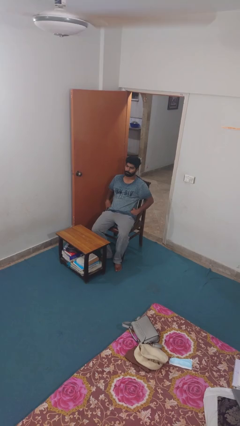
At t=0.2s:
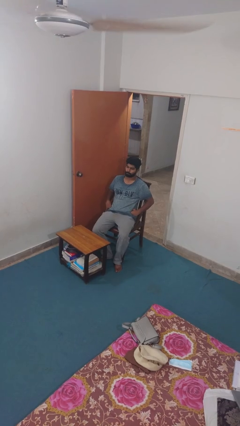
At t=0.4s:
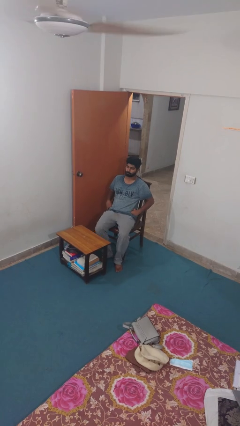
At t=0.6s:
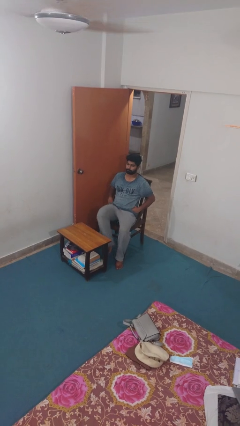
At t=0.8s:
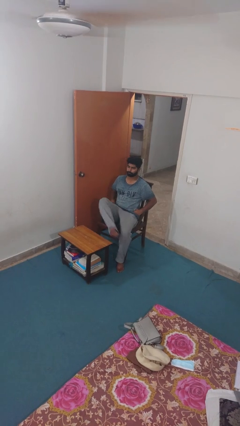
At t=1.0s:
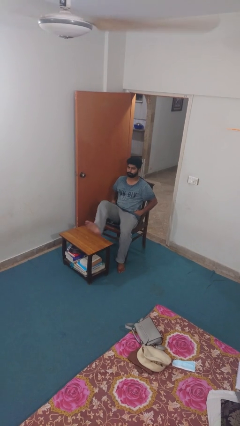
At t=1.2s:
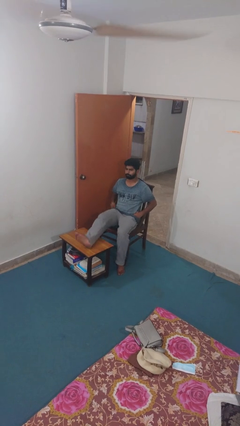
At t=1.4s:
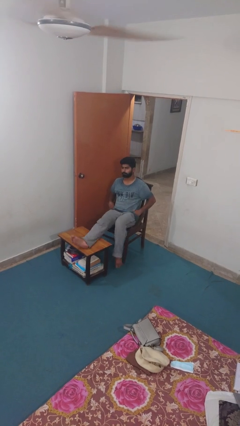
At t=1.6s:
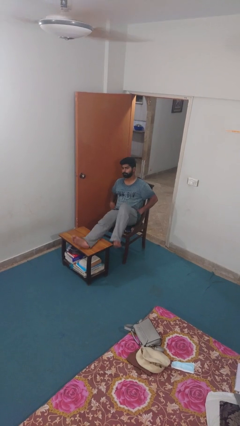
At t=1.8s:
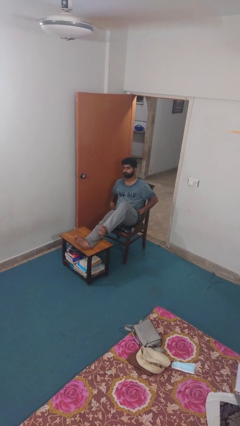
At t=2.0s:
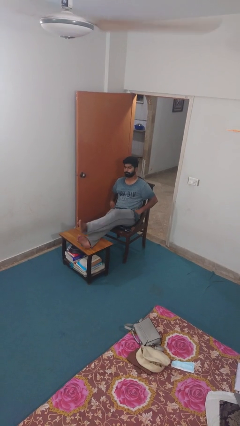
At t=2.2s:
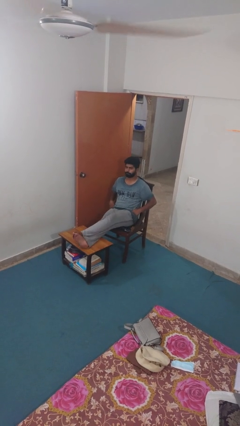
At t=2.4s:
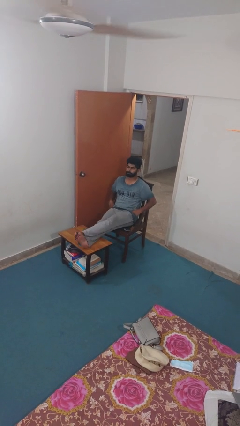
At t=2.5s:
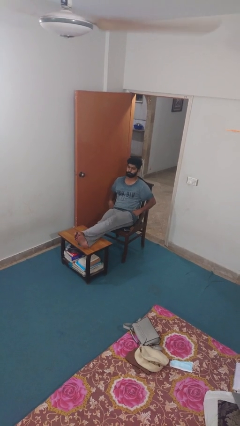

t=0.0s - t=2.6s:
person puts feet up

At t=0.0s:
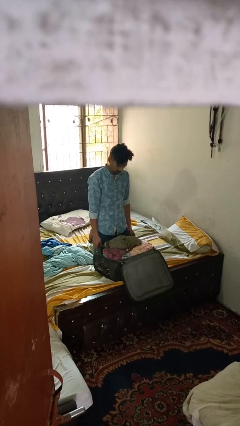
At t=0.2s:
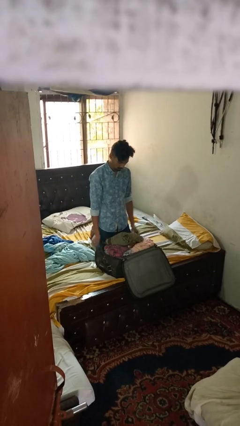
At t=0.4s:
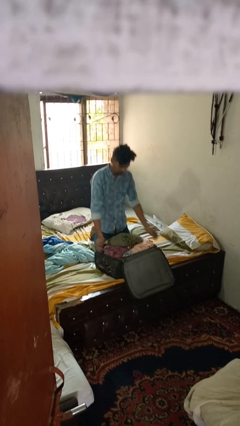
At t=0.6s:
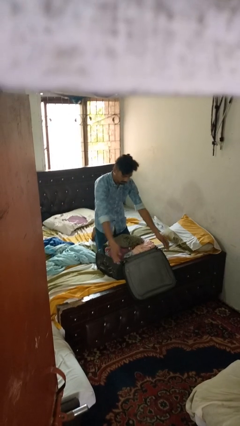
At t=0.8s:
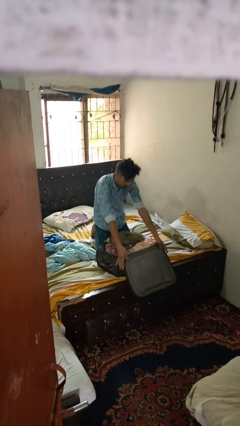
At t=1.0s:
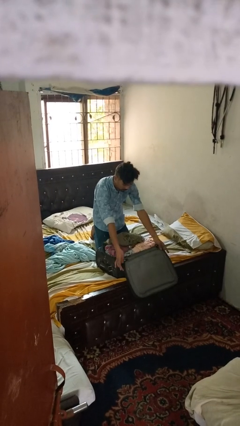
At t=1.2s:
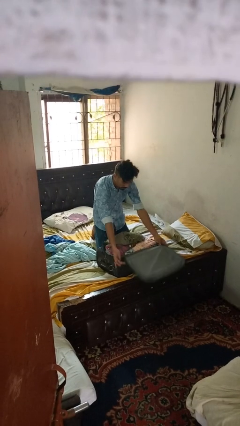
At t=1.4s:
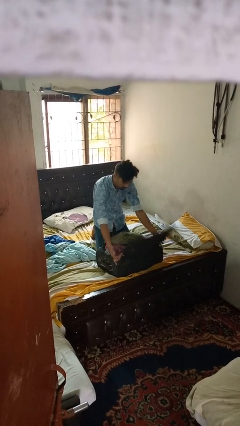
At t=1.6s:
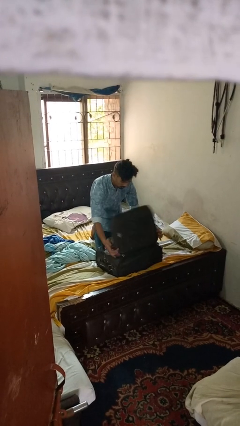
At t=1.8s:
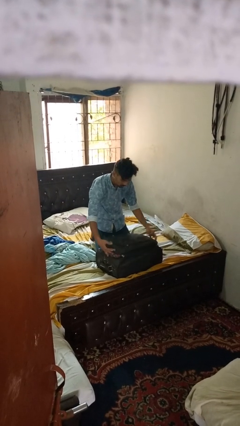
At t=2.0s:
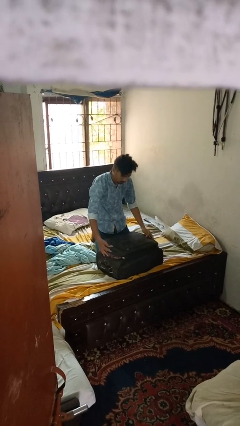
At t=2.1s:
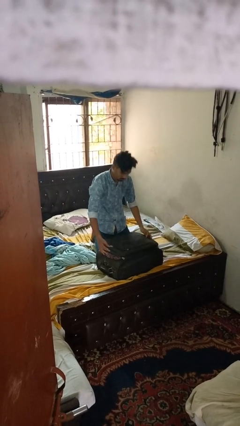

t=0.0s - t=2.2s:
person closes suitcase

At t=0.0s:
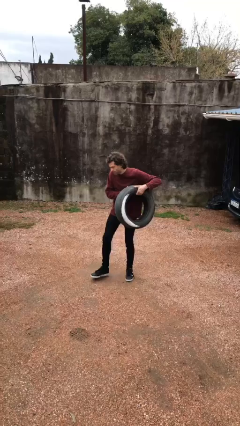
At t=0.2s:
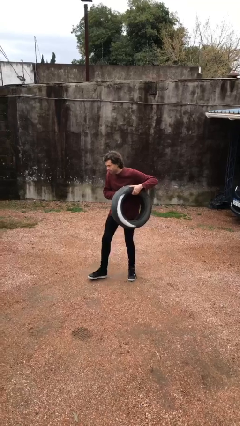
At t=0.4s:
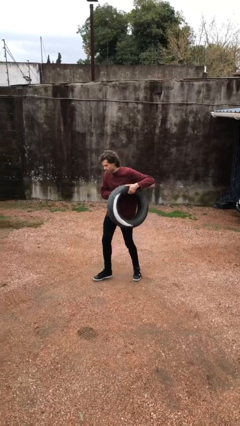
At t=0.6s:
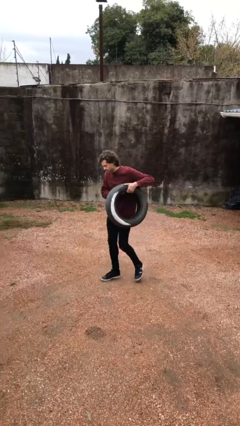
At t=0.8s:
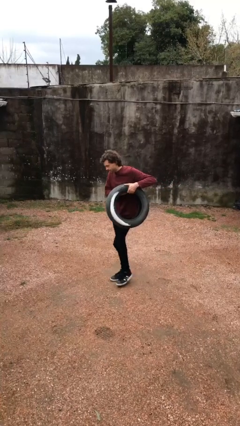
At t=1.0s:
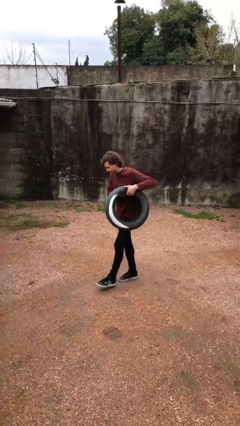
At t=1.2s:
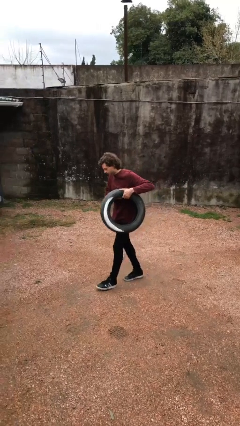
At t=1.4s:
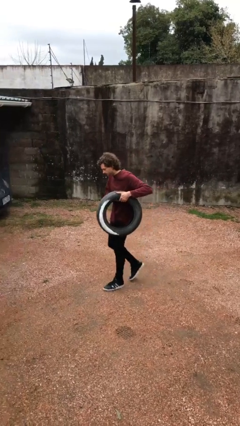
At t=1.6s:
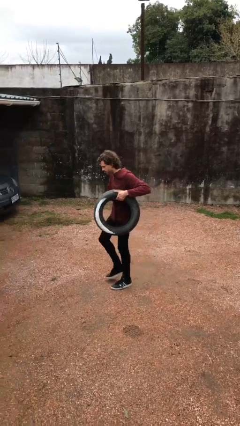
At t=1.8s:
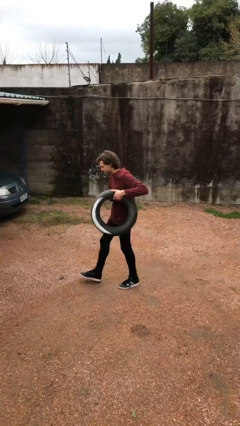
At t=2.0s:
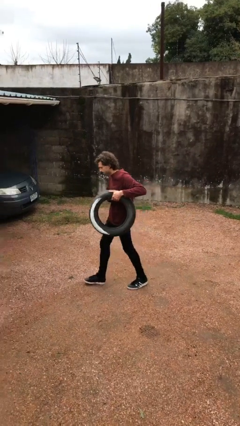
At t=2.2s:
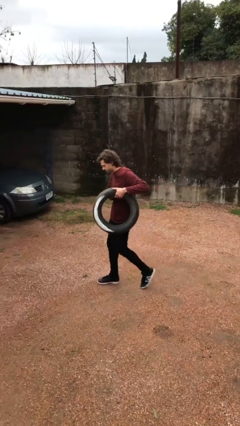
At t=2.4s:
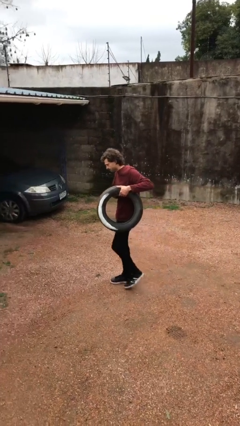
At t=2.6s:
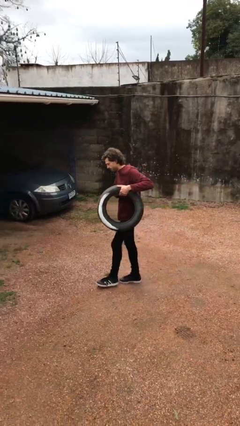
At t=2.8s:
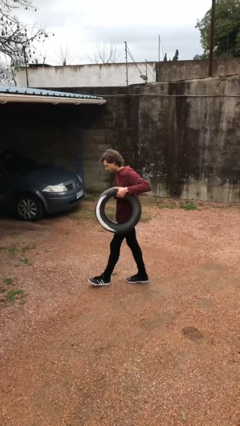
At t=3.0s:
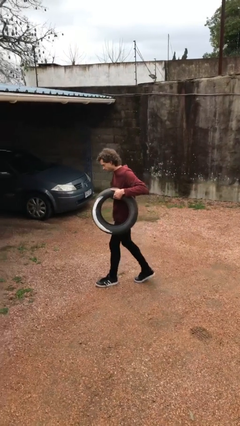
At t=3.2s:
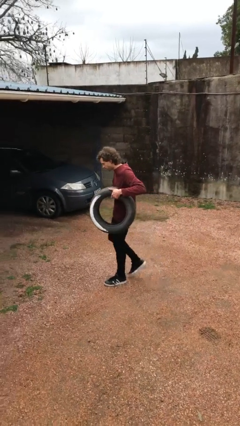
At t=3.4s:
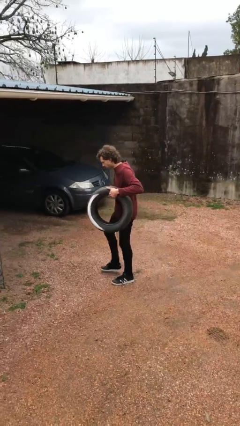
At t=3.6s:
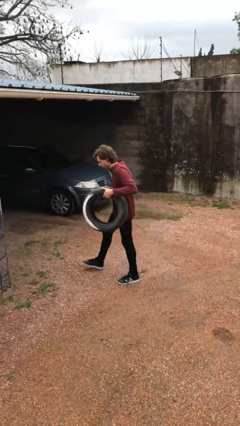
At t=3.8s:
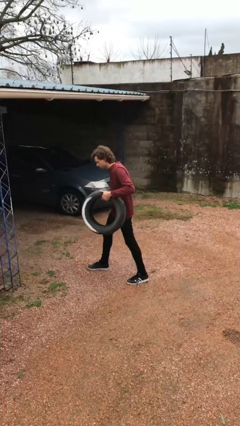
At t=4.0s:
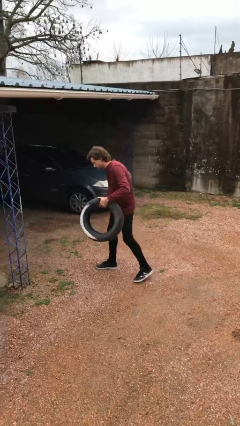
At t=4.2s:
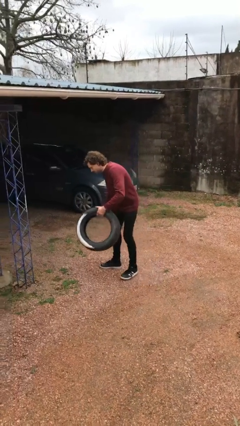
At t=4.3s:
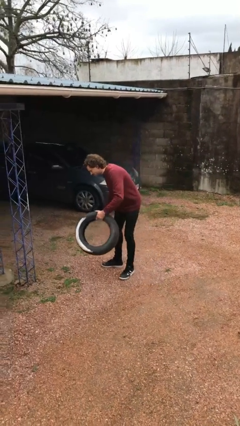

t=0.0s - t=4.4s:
person carries heavy object

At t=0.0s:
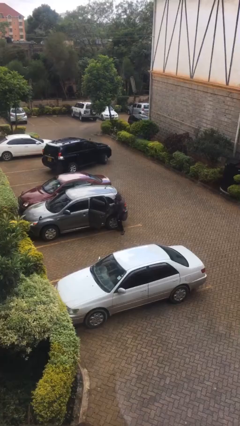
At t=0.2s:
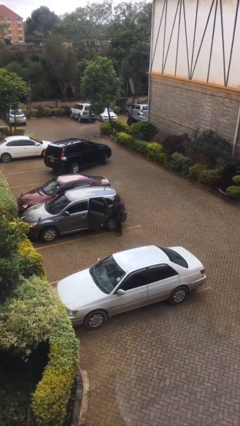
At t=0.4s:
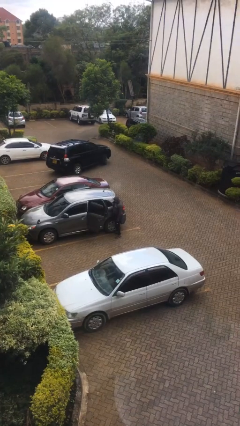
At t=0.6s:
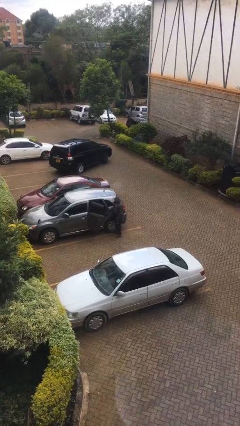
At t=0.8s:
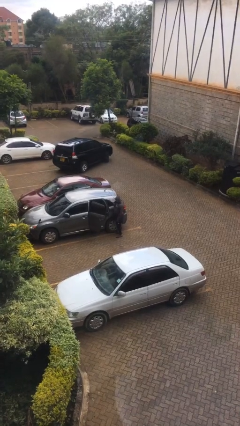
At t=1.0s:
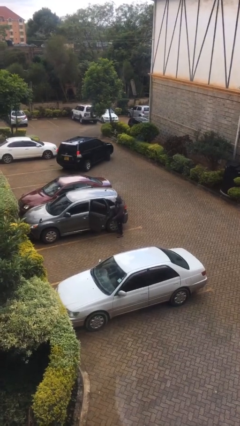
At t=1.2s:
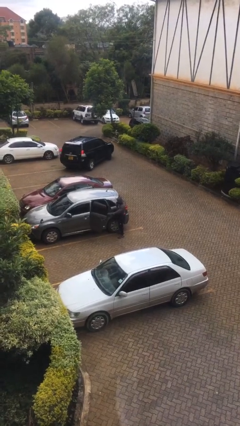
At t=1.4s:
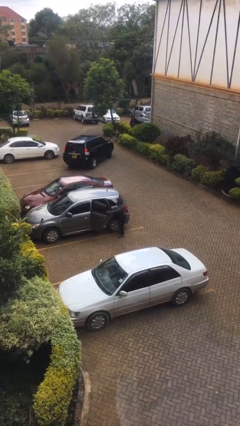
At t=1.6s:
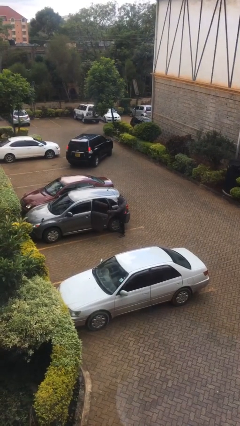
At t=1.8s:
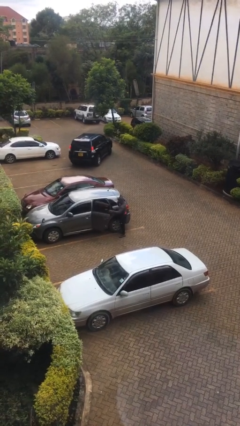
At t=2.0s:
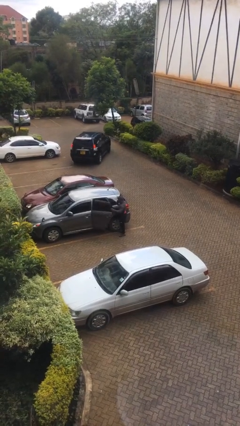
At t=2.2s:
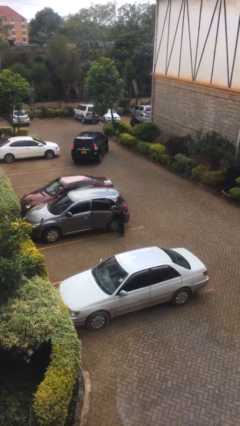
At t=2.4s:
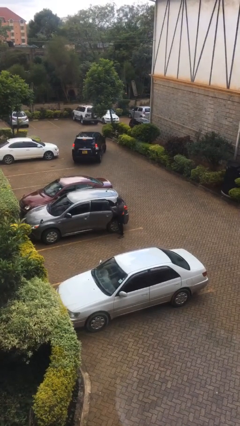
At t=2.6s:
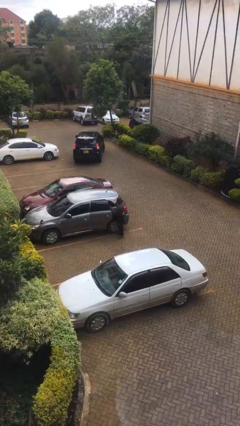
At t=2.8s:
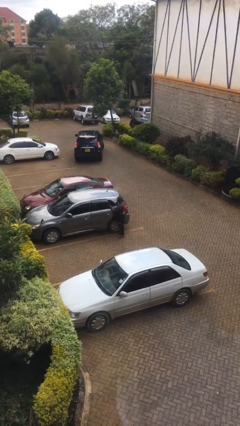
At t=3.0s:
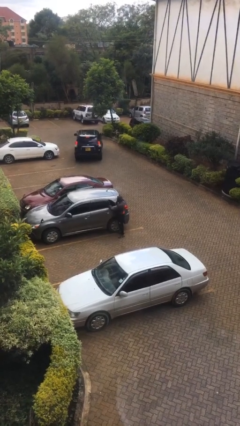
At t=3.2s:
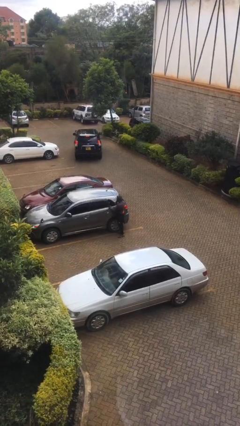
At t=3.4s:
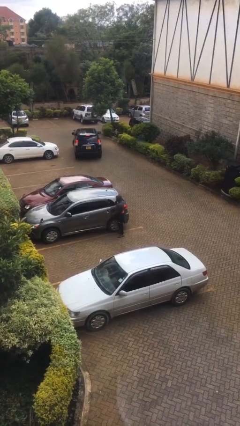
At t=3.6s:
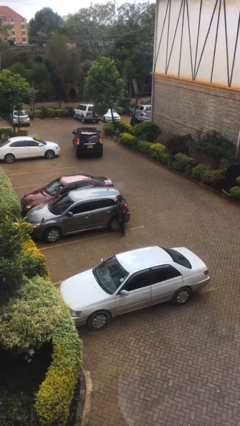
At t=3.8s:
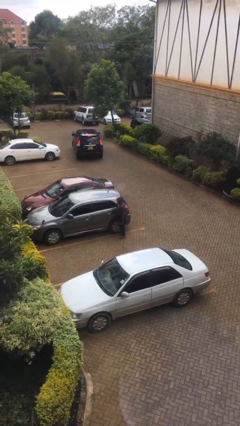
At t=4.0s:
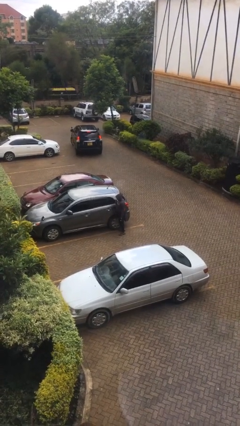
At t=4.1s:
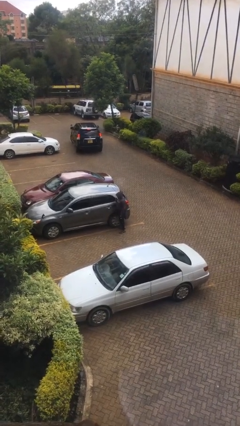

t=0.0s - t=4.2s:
person closes car door

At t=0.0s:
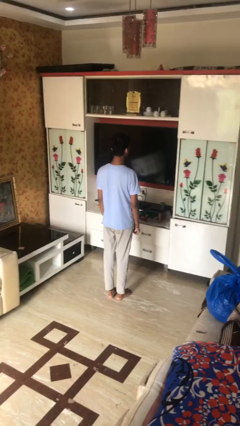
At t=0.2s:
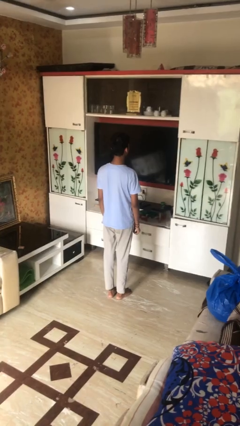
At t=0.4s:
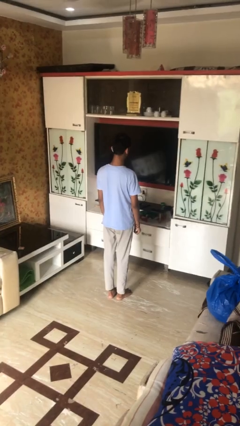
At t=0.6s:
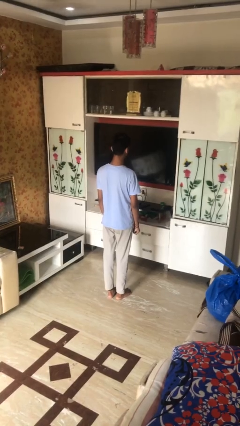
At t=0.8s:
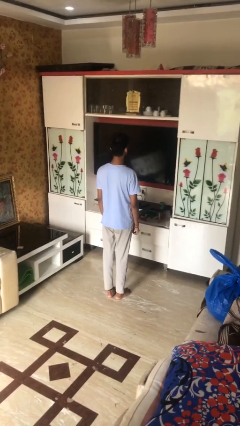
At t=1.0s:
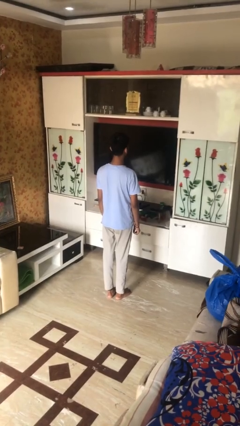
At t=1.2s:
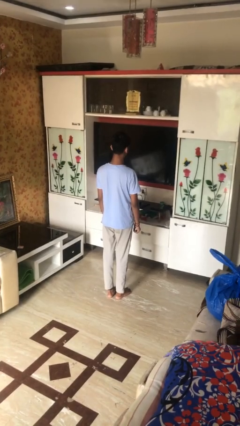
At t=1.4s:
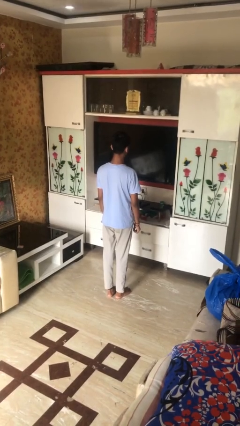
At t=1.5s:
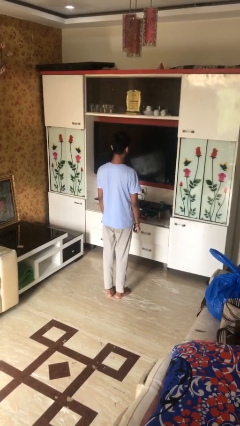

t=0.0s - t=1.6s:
person nods head

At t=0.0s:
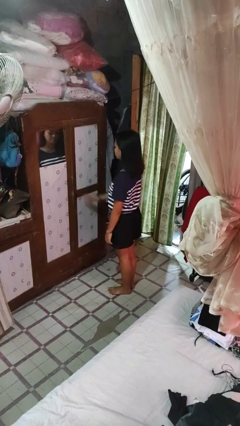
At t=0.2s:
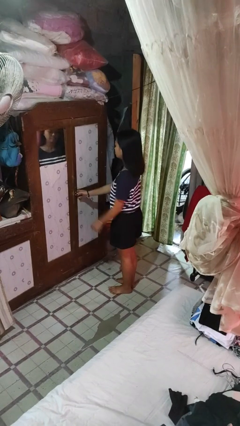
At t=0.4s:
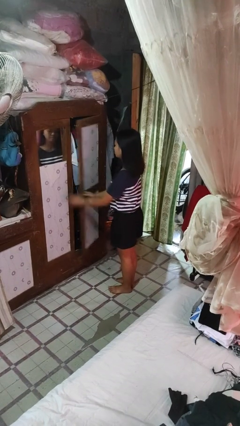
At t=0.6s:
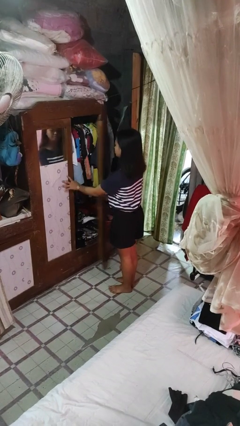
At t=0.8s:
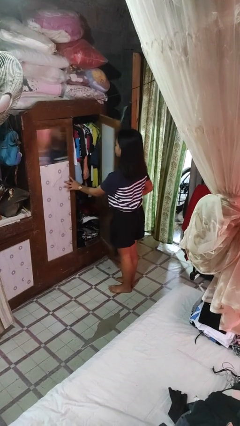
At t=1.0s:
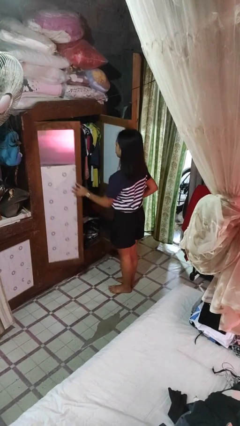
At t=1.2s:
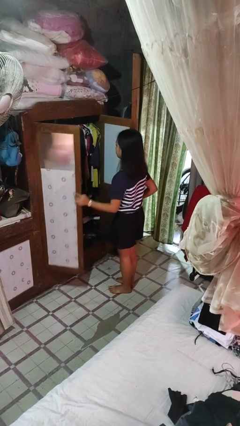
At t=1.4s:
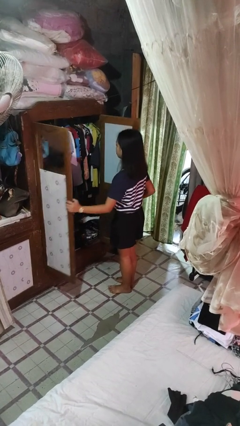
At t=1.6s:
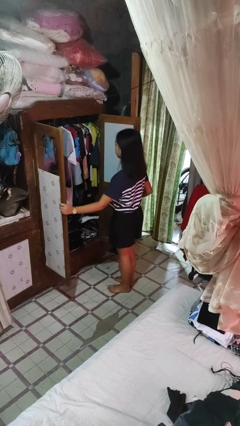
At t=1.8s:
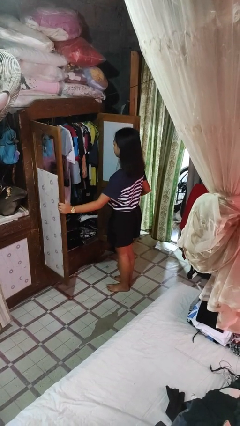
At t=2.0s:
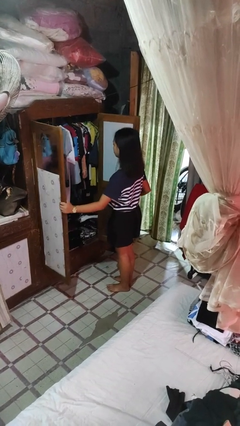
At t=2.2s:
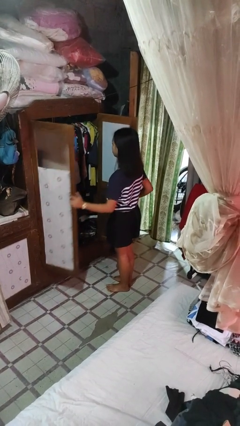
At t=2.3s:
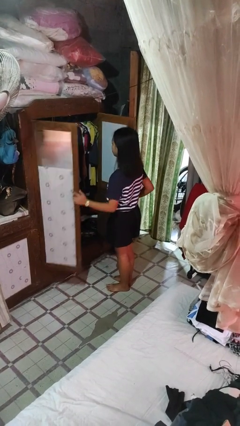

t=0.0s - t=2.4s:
person opens closet door
